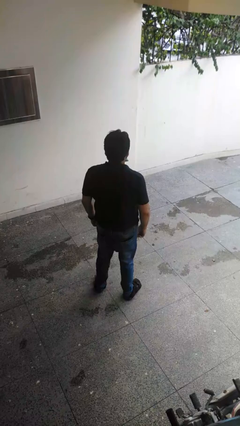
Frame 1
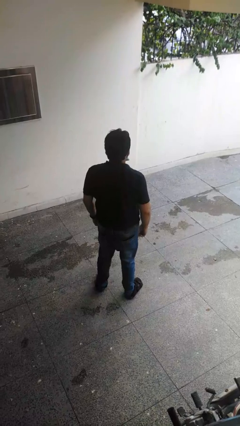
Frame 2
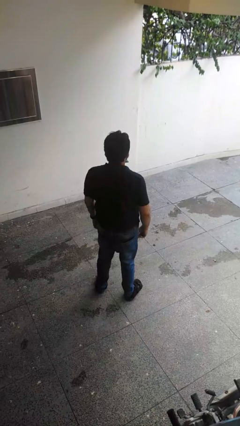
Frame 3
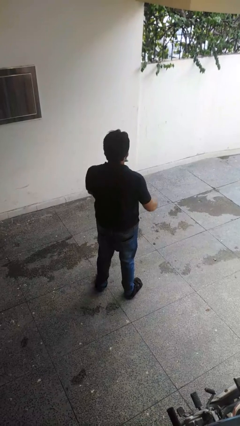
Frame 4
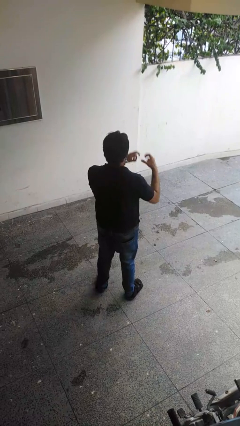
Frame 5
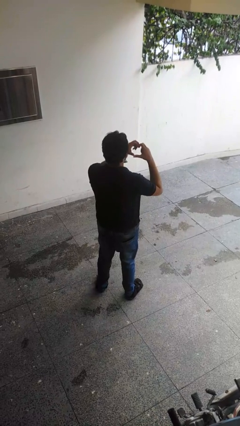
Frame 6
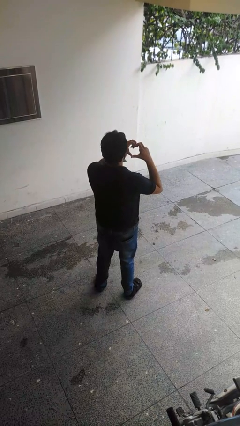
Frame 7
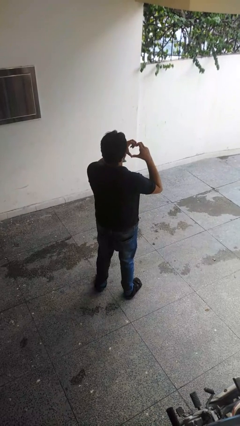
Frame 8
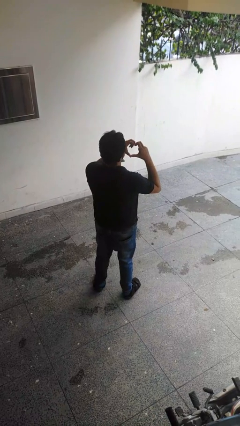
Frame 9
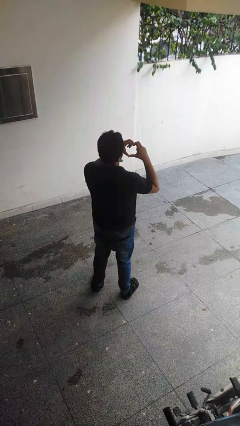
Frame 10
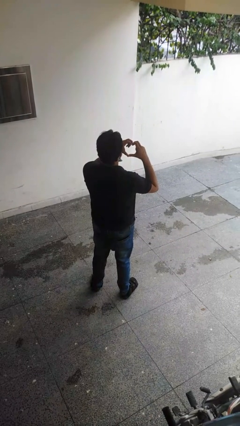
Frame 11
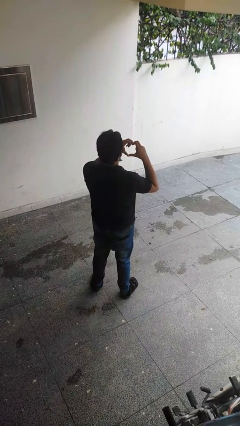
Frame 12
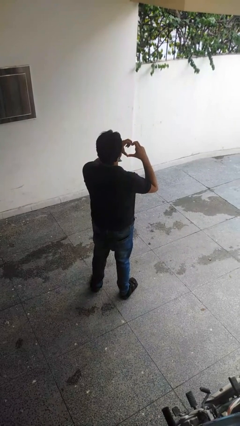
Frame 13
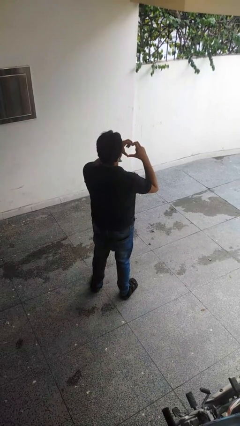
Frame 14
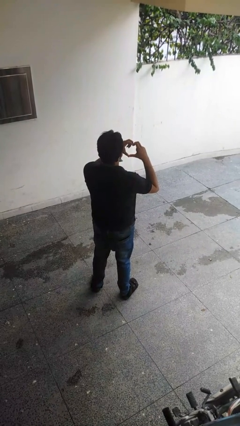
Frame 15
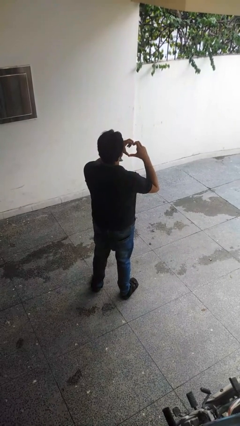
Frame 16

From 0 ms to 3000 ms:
person gestures heart

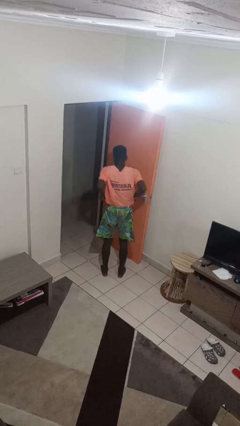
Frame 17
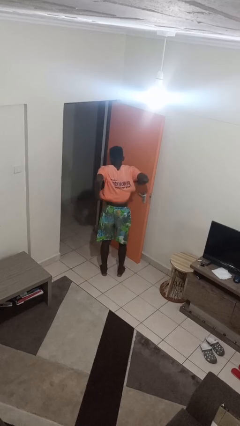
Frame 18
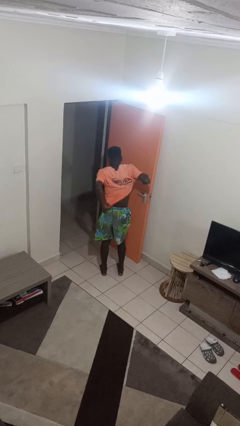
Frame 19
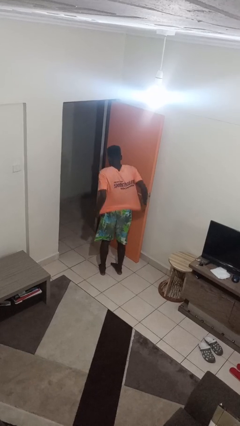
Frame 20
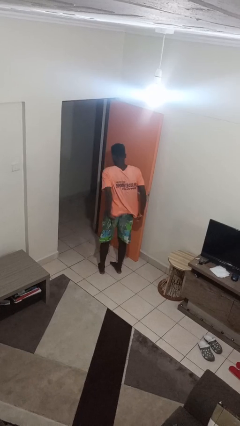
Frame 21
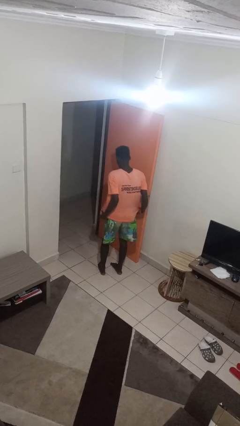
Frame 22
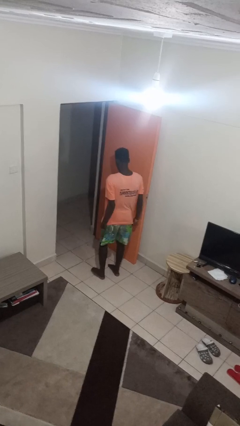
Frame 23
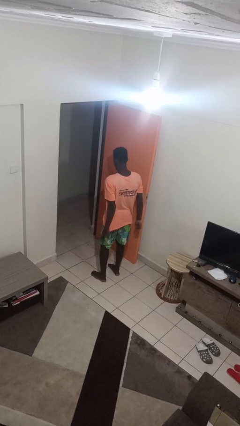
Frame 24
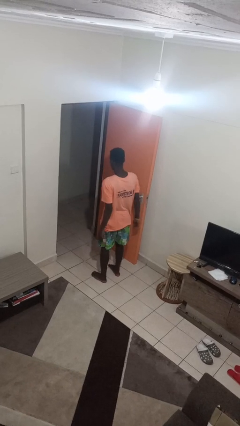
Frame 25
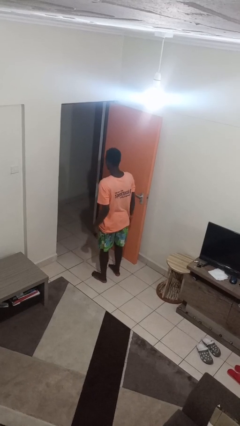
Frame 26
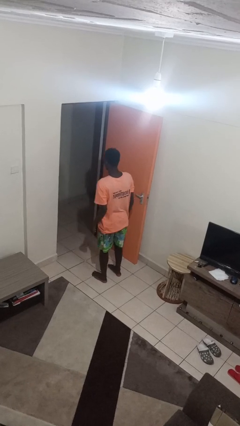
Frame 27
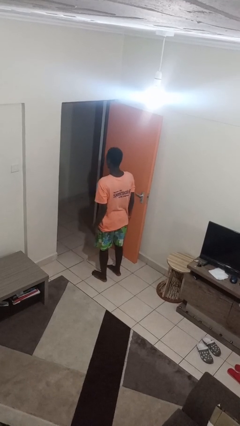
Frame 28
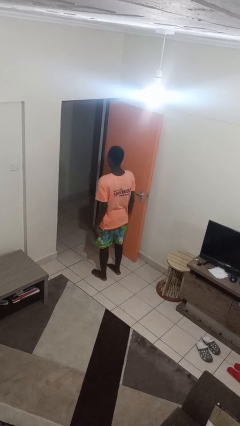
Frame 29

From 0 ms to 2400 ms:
person untucks shirt

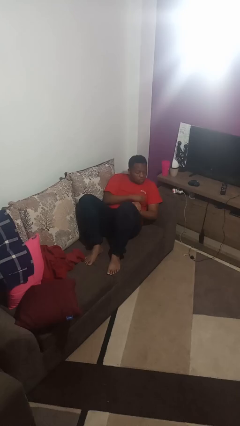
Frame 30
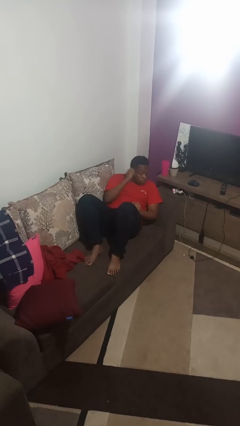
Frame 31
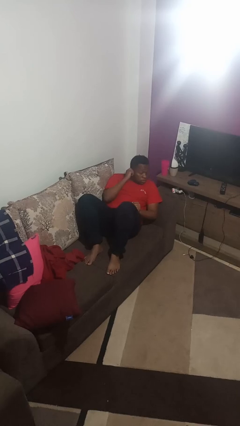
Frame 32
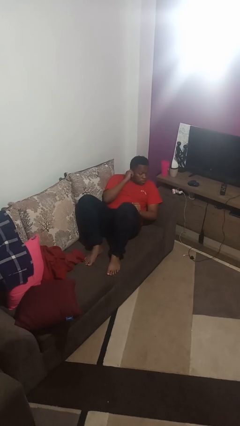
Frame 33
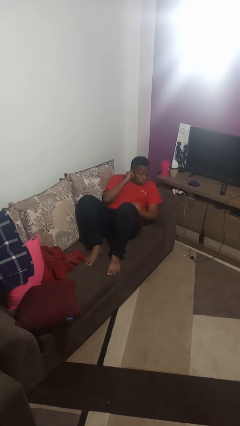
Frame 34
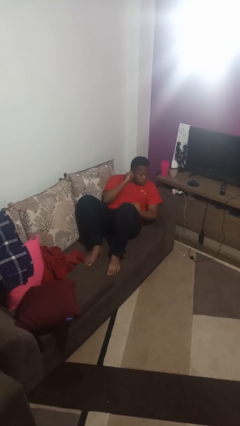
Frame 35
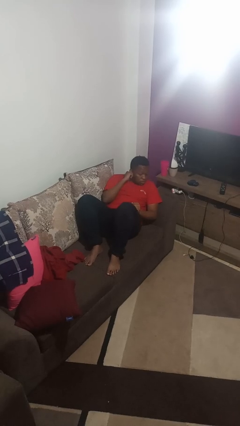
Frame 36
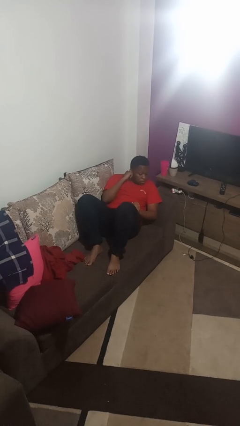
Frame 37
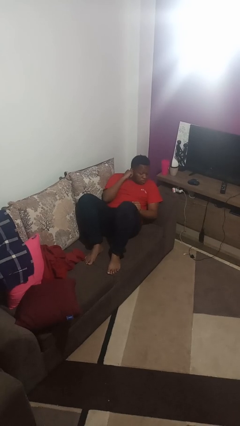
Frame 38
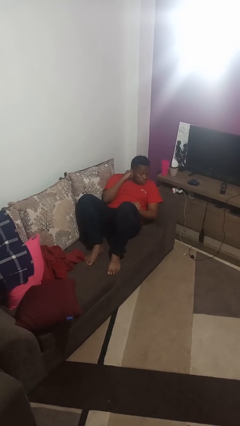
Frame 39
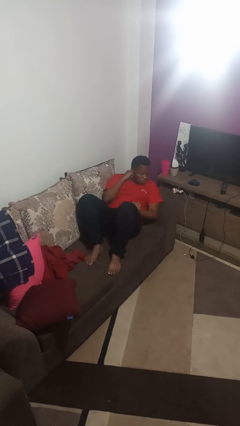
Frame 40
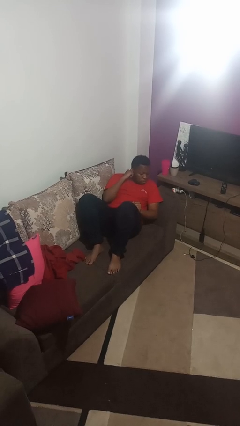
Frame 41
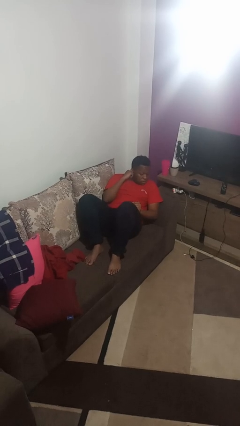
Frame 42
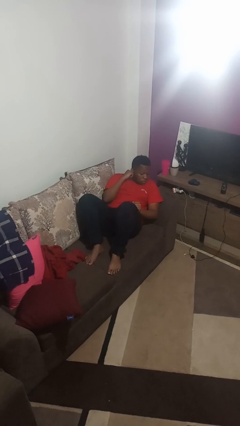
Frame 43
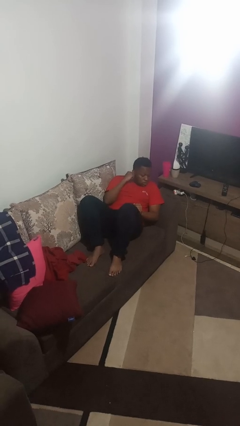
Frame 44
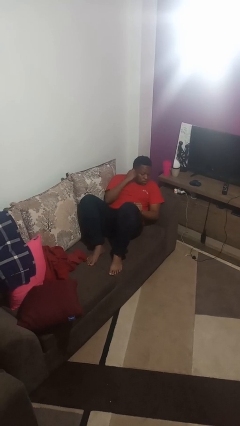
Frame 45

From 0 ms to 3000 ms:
person touches earlobe

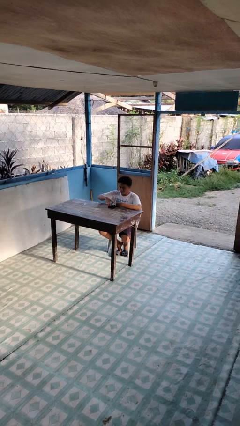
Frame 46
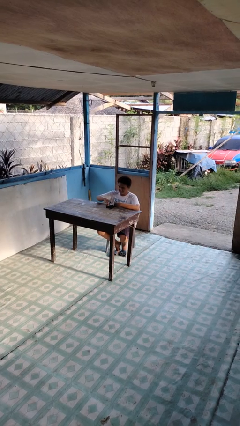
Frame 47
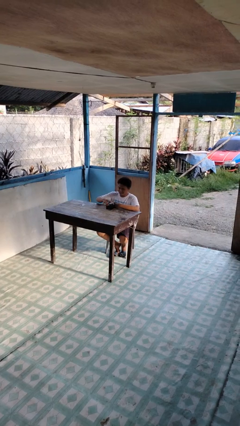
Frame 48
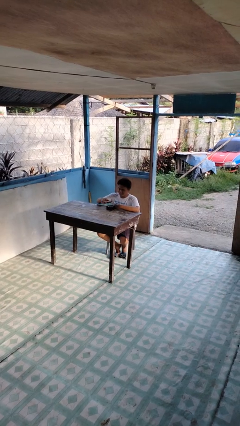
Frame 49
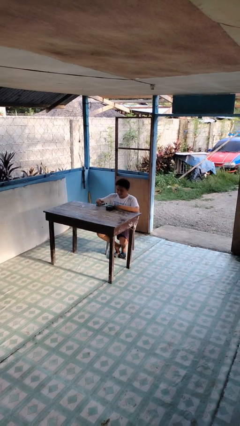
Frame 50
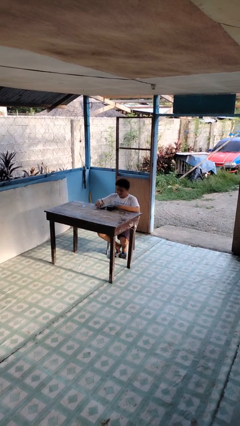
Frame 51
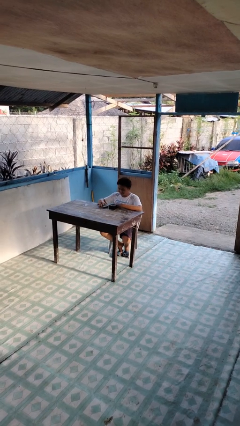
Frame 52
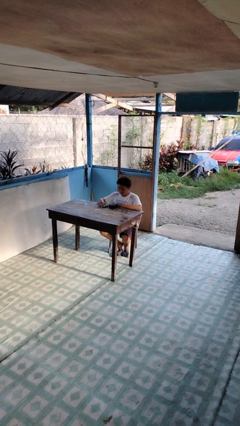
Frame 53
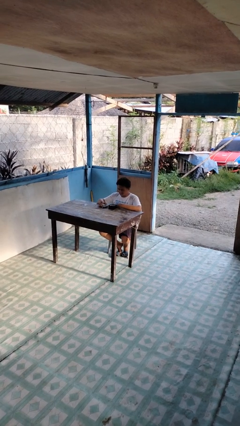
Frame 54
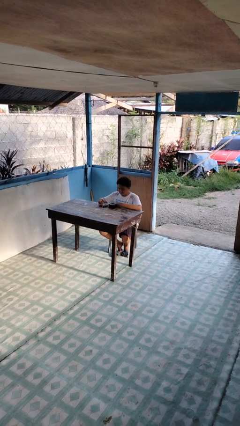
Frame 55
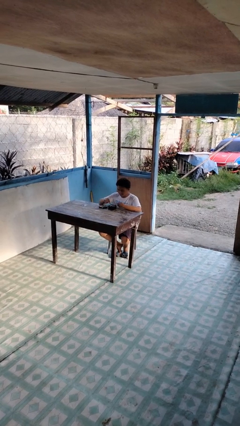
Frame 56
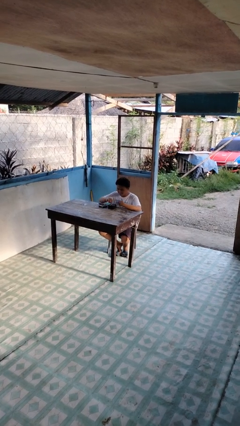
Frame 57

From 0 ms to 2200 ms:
person opens jewelry box

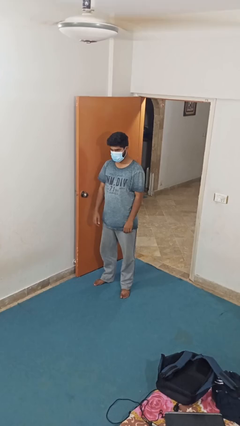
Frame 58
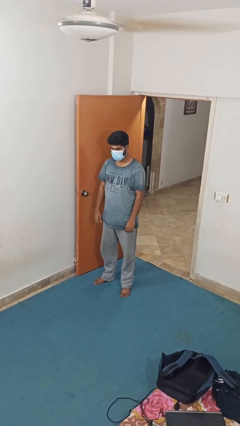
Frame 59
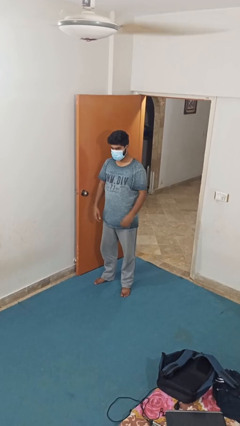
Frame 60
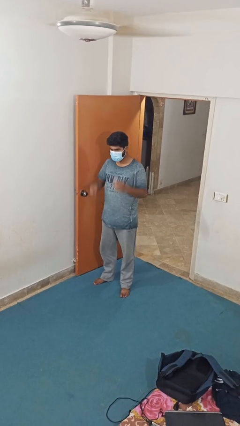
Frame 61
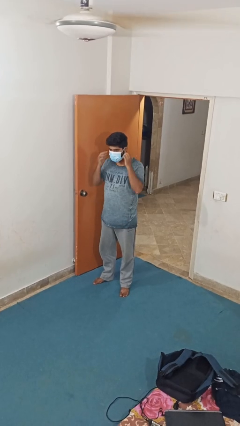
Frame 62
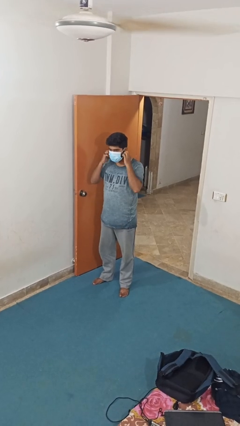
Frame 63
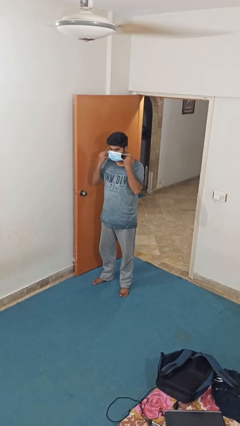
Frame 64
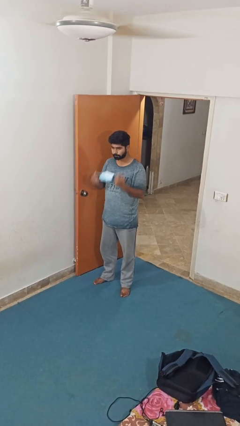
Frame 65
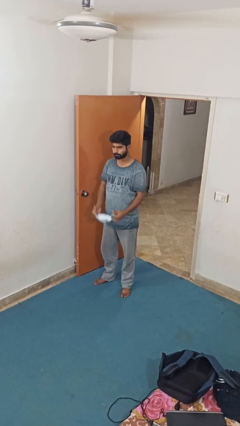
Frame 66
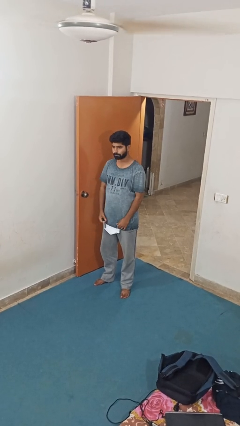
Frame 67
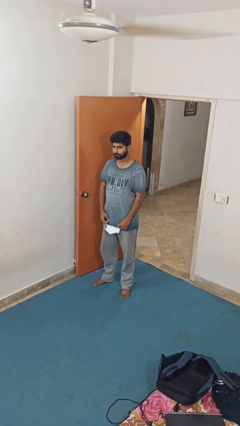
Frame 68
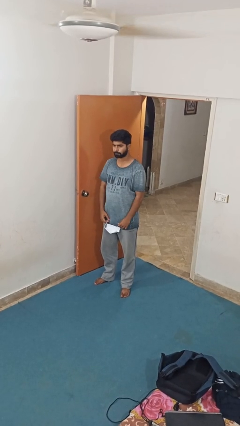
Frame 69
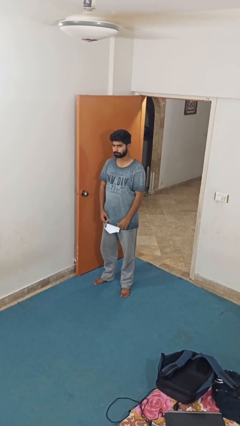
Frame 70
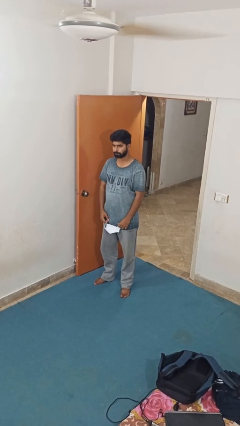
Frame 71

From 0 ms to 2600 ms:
person takes off facemask

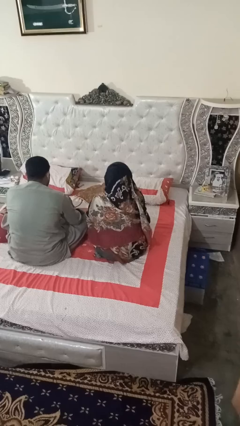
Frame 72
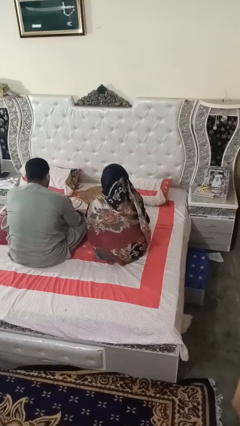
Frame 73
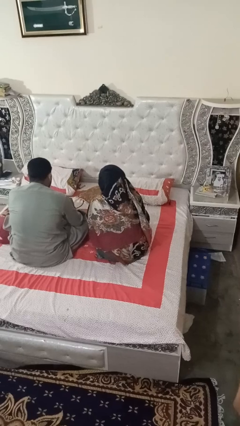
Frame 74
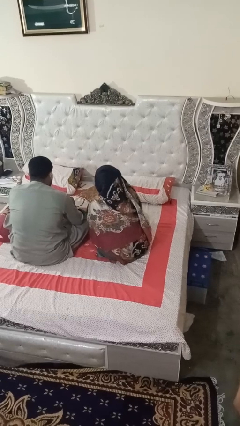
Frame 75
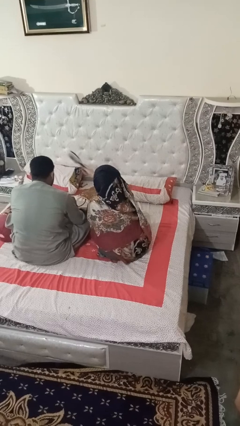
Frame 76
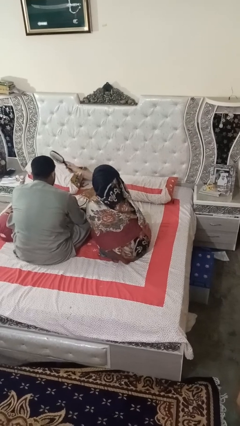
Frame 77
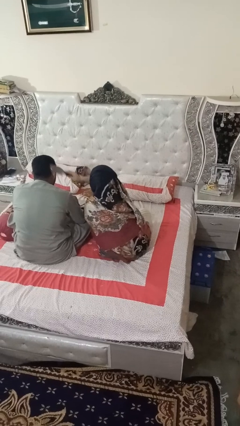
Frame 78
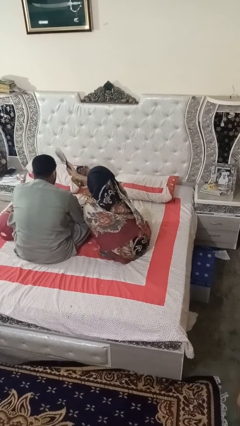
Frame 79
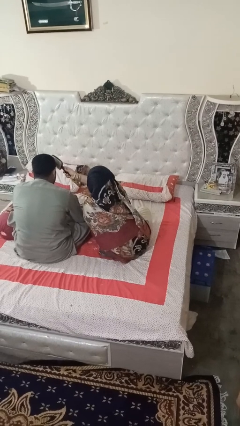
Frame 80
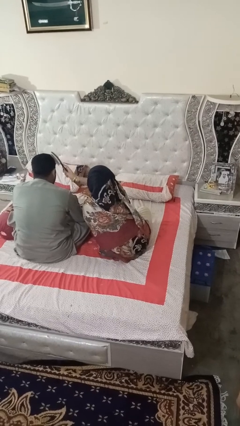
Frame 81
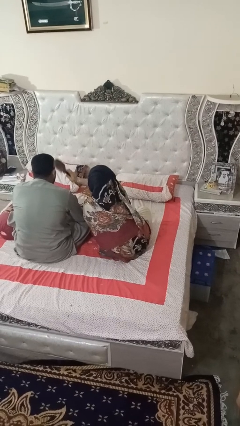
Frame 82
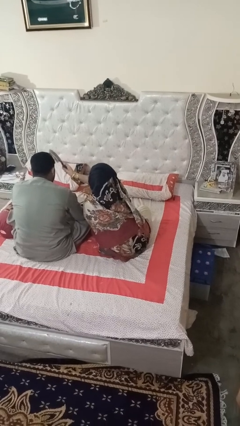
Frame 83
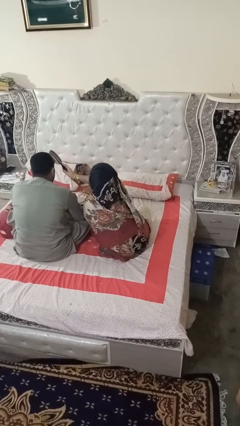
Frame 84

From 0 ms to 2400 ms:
person brushes hair of person

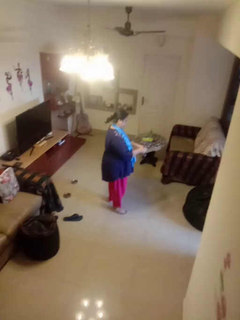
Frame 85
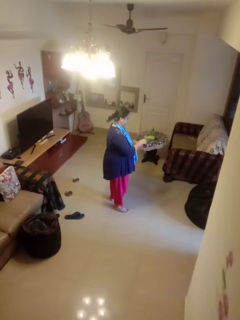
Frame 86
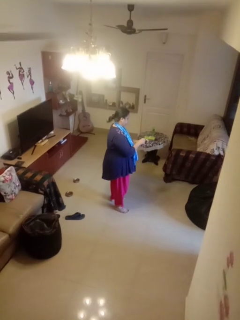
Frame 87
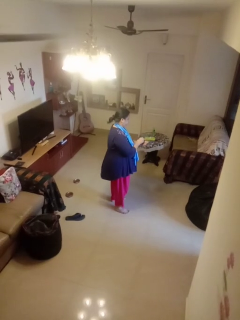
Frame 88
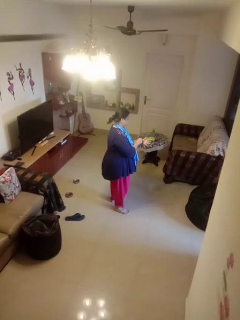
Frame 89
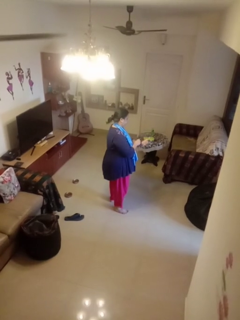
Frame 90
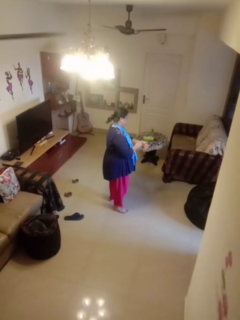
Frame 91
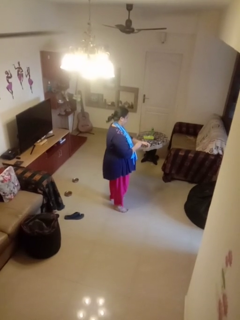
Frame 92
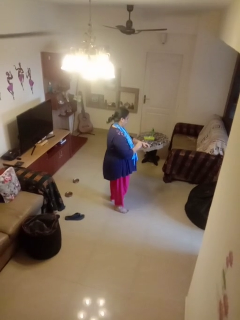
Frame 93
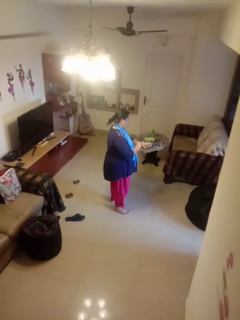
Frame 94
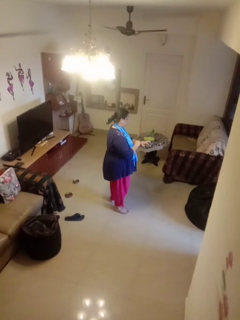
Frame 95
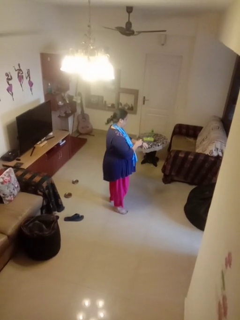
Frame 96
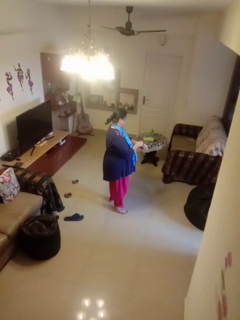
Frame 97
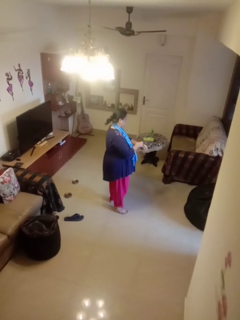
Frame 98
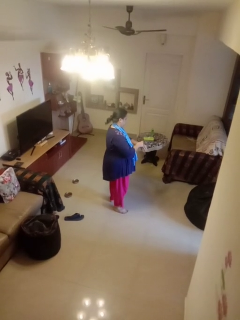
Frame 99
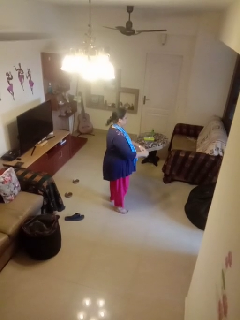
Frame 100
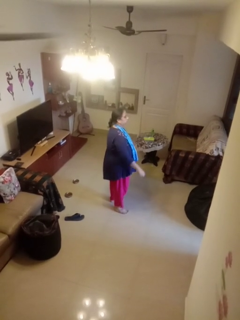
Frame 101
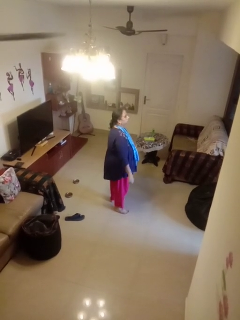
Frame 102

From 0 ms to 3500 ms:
person puts on wristwatch
